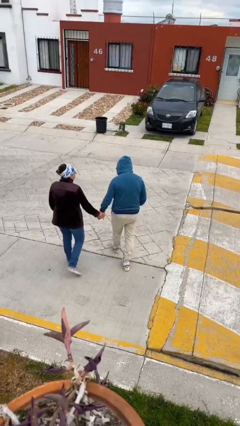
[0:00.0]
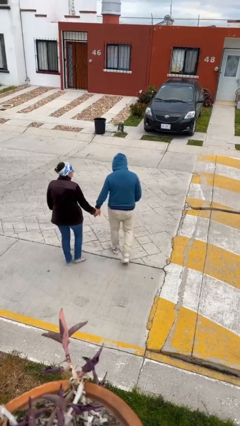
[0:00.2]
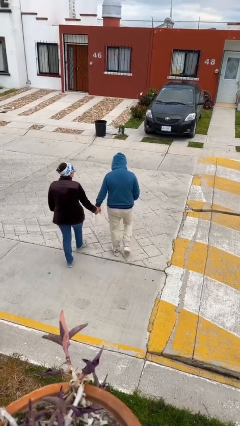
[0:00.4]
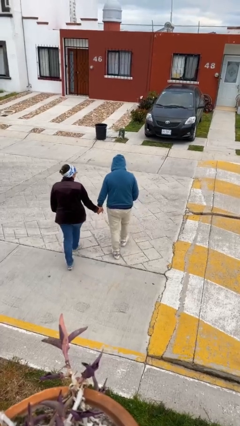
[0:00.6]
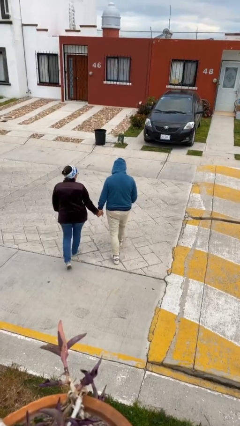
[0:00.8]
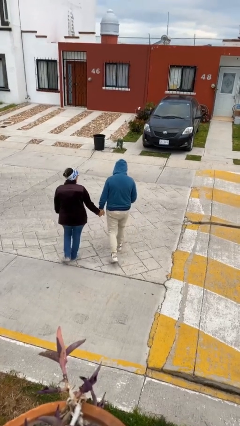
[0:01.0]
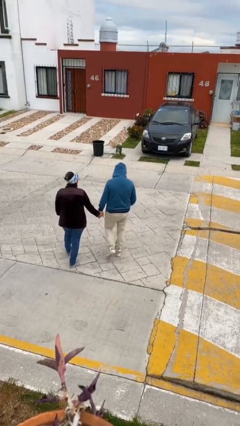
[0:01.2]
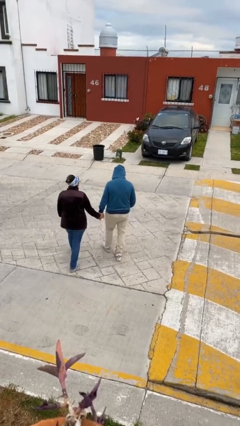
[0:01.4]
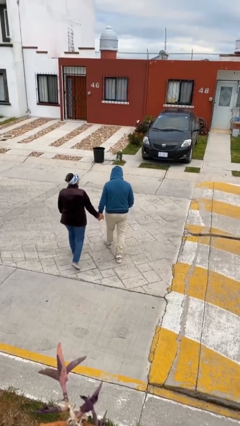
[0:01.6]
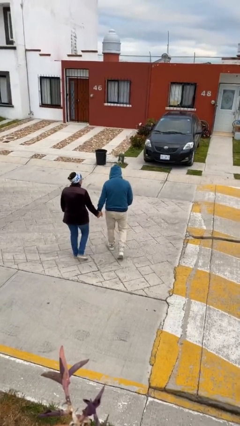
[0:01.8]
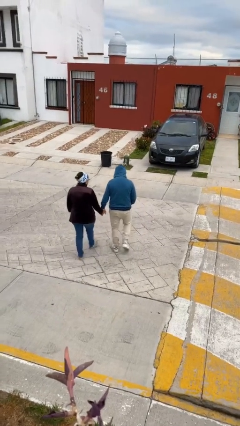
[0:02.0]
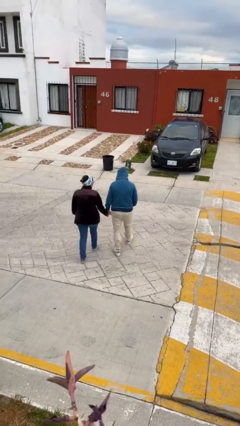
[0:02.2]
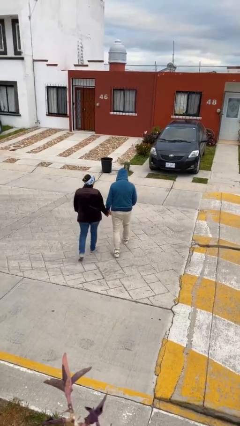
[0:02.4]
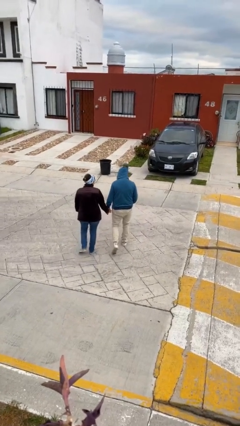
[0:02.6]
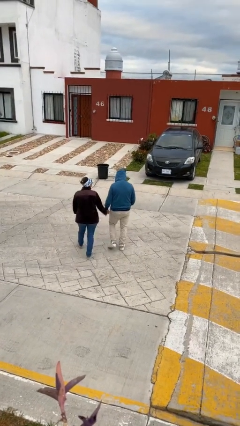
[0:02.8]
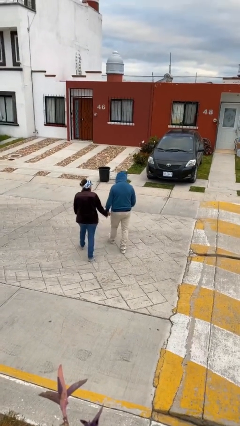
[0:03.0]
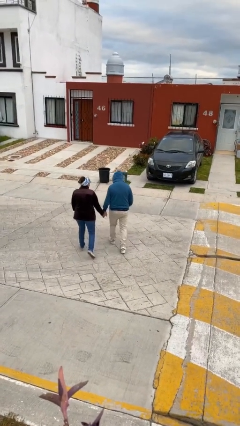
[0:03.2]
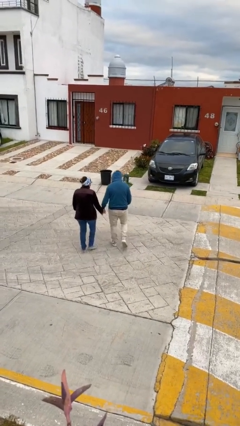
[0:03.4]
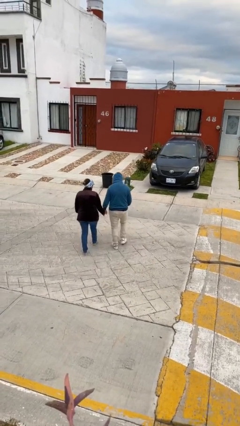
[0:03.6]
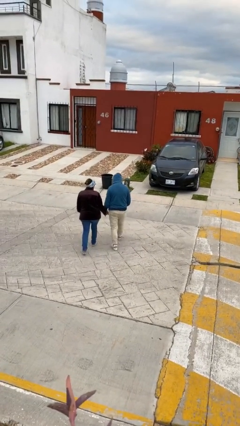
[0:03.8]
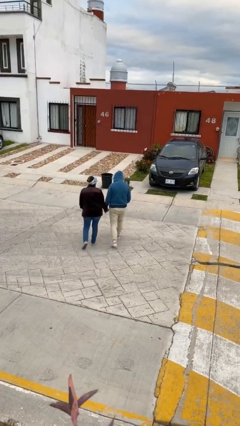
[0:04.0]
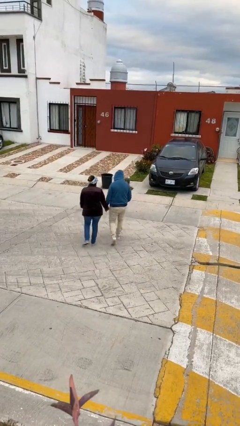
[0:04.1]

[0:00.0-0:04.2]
person holds hand

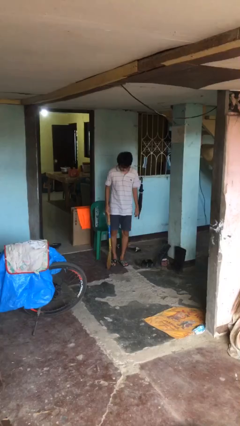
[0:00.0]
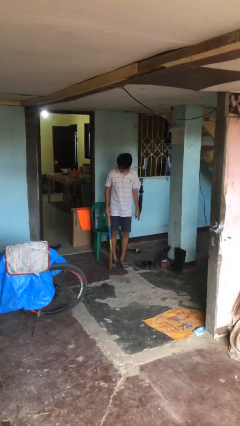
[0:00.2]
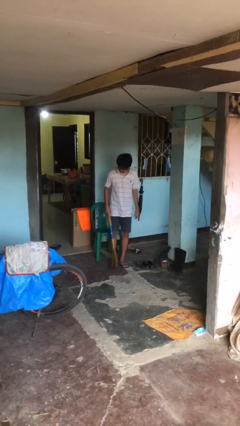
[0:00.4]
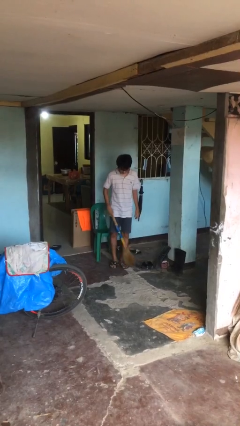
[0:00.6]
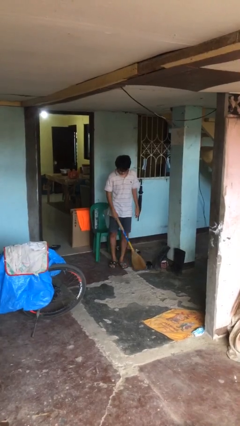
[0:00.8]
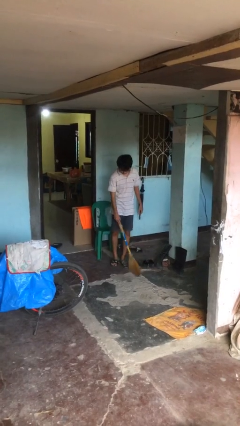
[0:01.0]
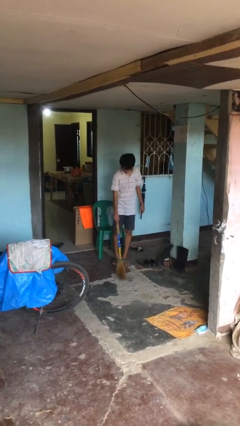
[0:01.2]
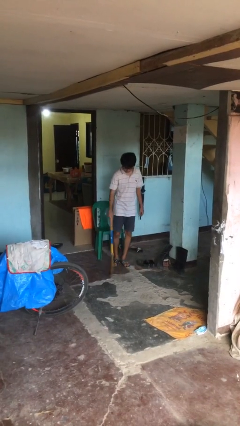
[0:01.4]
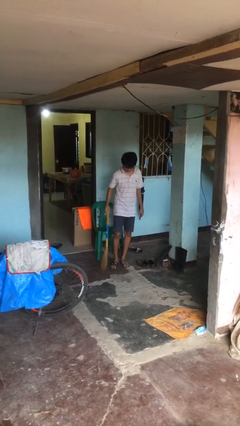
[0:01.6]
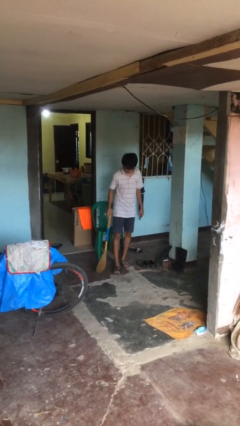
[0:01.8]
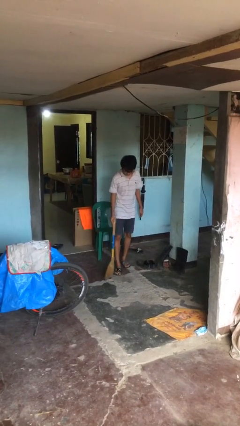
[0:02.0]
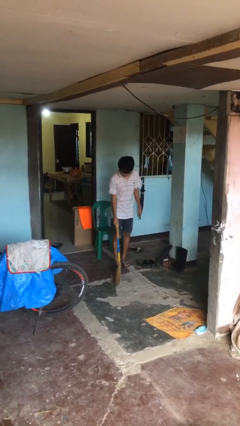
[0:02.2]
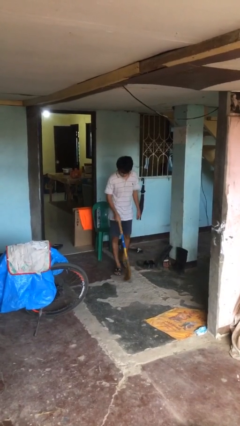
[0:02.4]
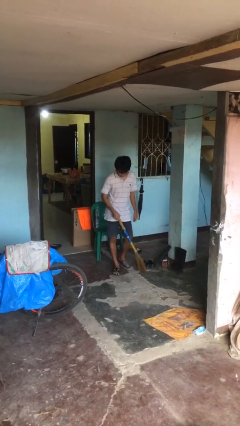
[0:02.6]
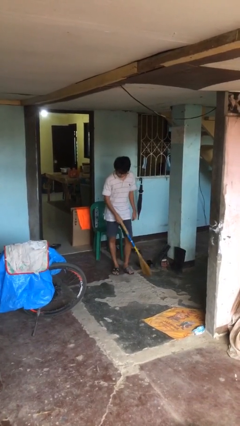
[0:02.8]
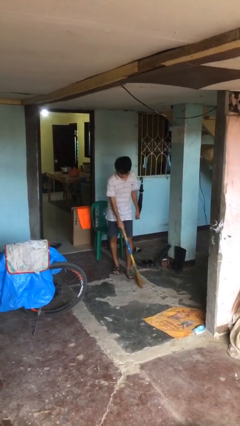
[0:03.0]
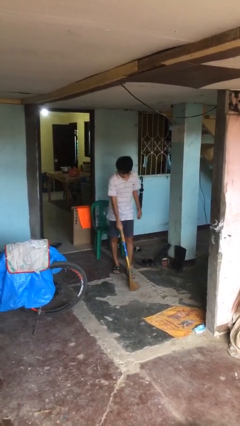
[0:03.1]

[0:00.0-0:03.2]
person sweeps floor

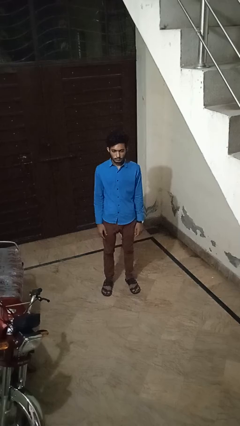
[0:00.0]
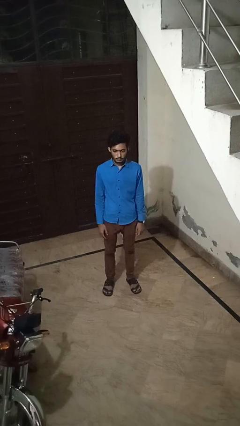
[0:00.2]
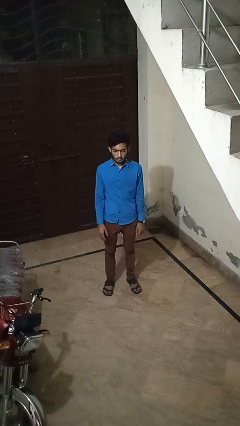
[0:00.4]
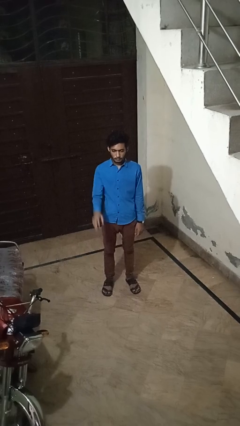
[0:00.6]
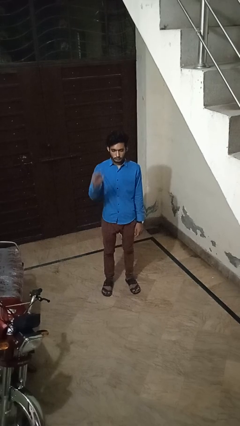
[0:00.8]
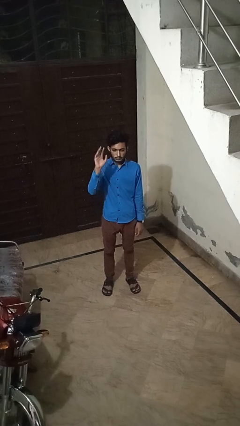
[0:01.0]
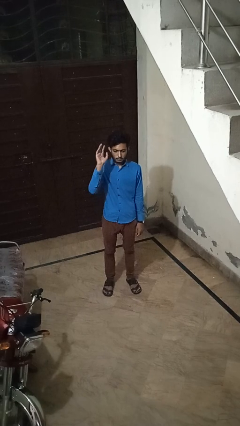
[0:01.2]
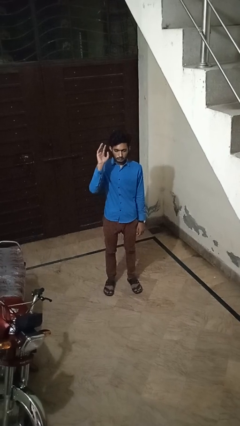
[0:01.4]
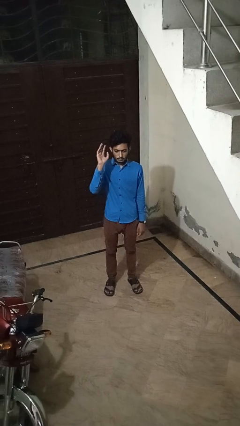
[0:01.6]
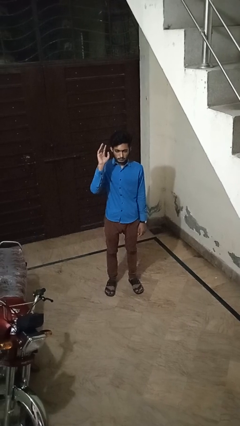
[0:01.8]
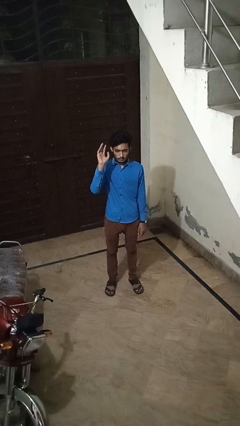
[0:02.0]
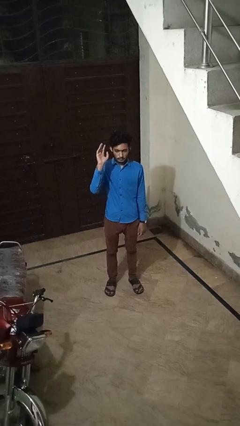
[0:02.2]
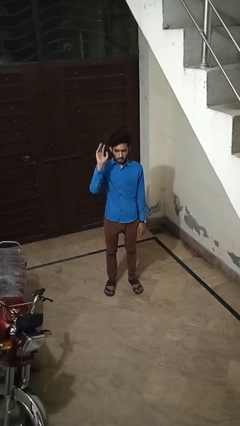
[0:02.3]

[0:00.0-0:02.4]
person gestures raise hand

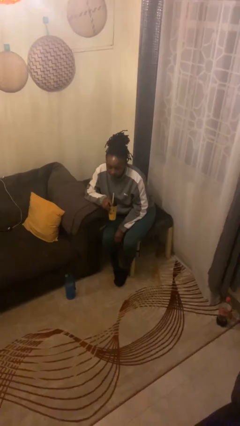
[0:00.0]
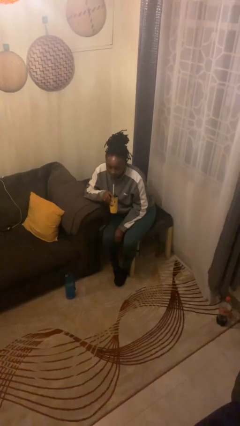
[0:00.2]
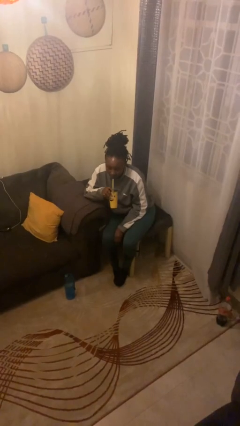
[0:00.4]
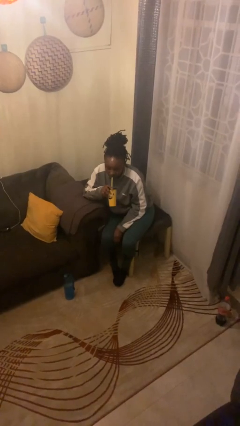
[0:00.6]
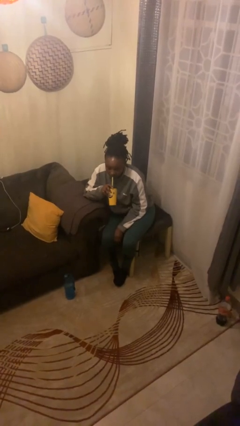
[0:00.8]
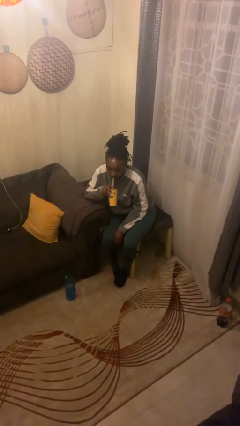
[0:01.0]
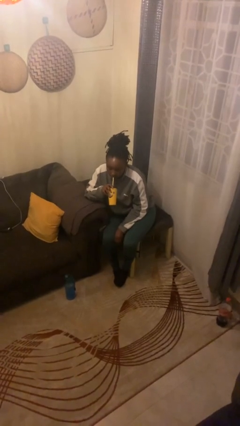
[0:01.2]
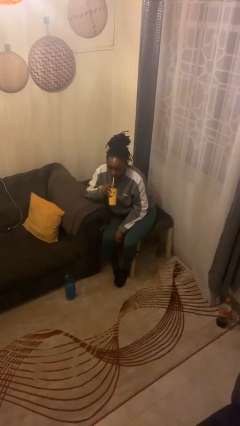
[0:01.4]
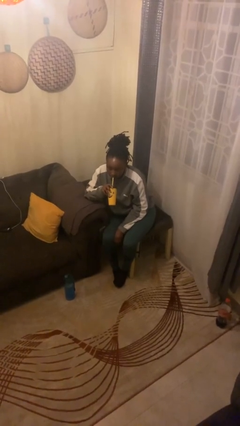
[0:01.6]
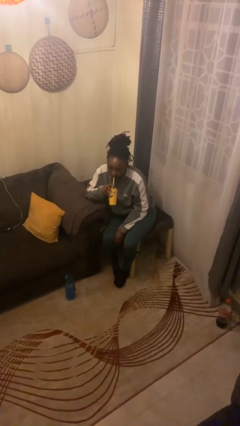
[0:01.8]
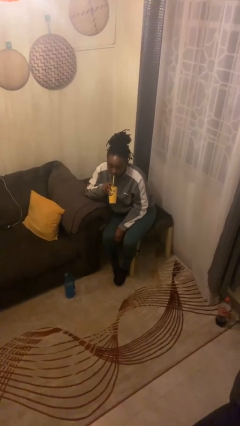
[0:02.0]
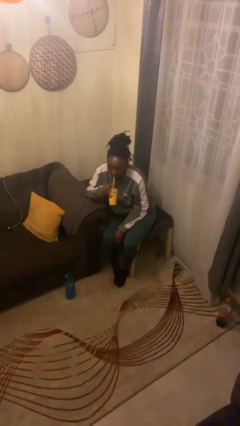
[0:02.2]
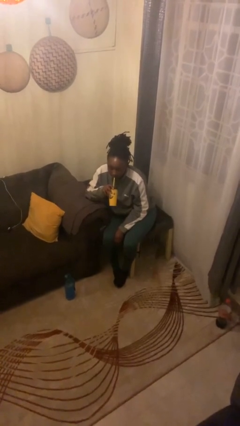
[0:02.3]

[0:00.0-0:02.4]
person drinks from straw

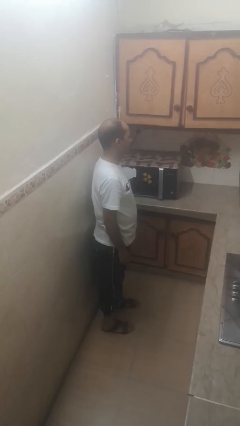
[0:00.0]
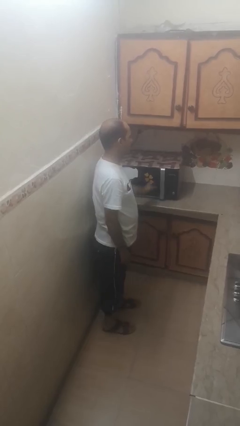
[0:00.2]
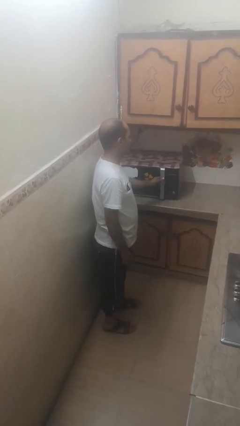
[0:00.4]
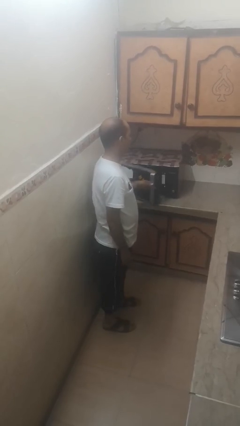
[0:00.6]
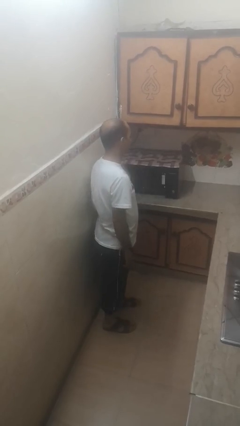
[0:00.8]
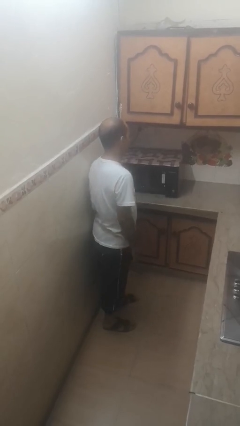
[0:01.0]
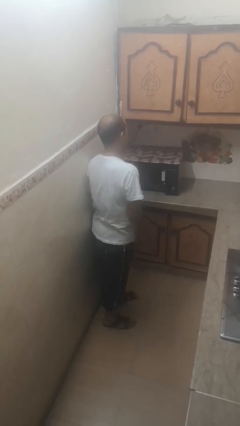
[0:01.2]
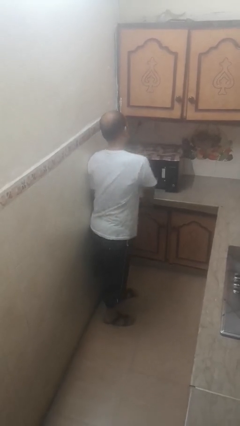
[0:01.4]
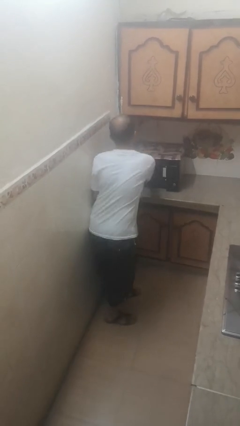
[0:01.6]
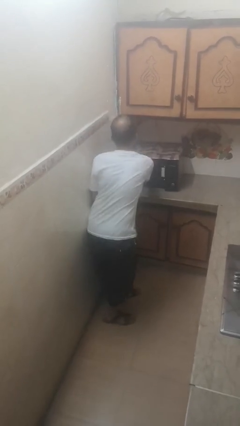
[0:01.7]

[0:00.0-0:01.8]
person takes object from microwave

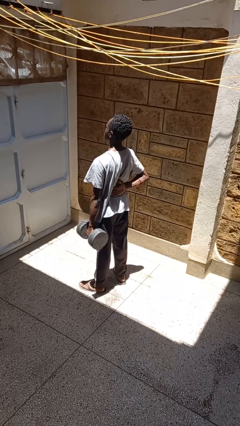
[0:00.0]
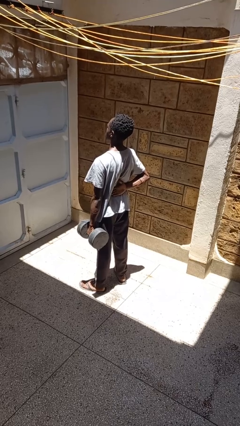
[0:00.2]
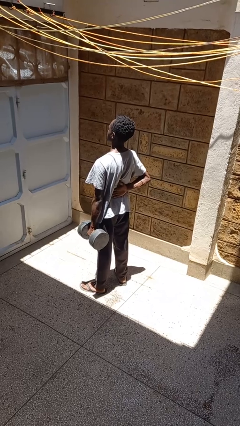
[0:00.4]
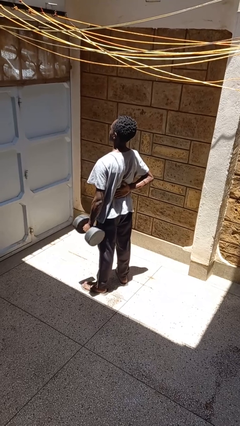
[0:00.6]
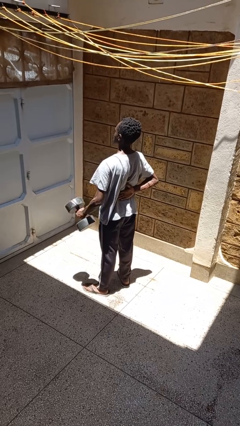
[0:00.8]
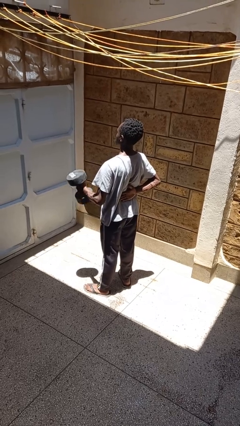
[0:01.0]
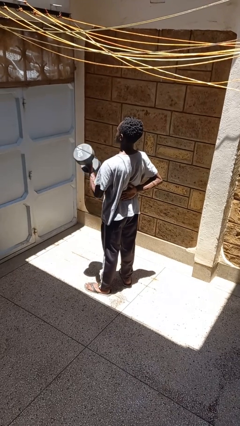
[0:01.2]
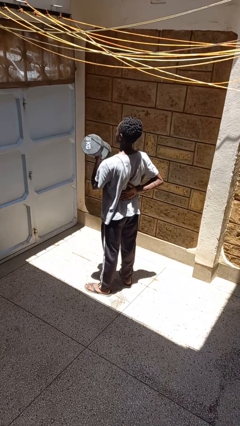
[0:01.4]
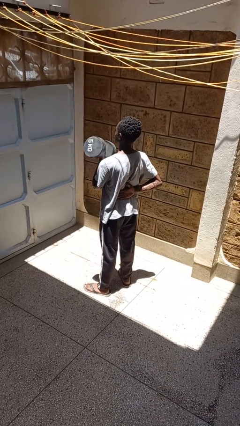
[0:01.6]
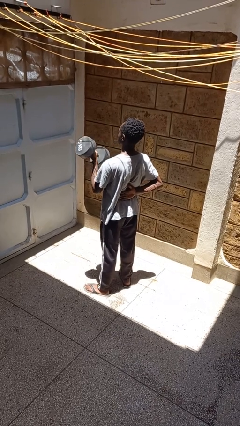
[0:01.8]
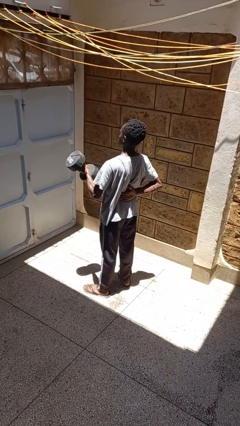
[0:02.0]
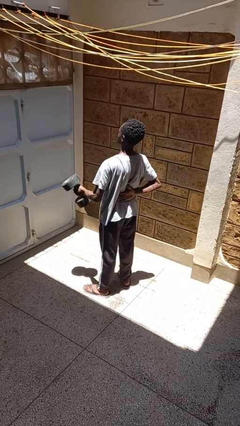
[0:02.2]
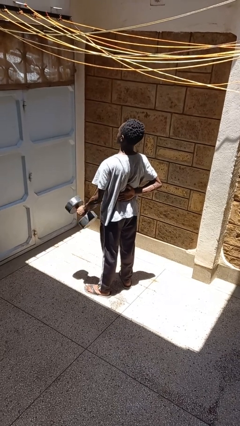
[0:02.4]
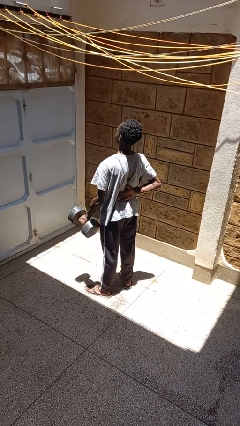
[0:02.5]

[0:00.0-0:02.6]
person lifts dumbbells

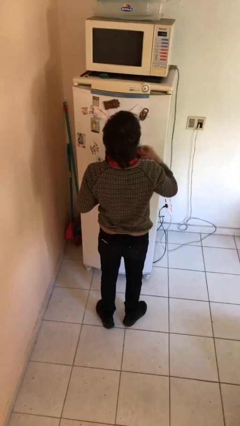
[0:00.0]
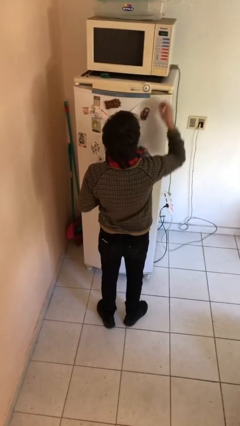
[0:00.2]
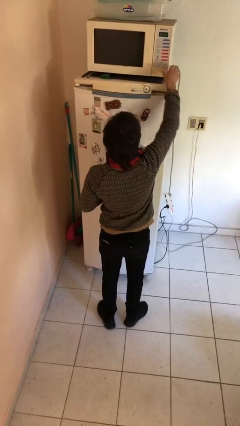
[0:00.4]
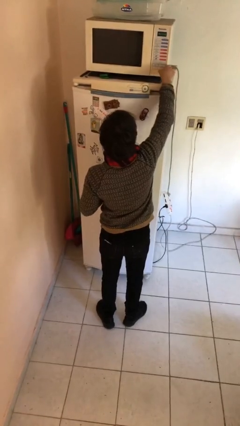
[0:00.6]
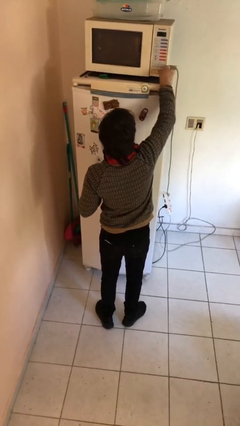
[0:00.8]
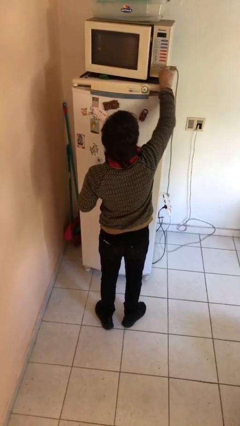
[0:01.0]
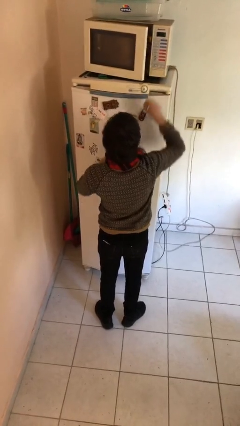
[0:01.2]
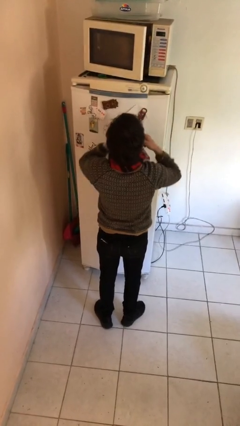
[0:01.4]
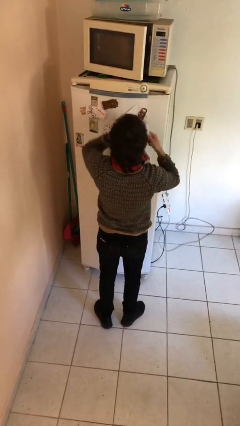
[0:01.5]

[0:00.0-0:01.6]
person opens microwave
